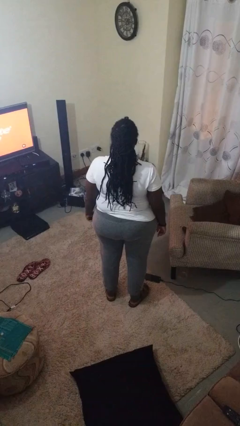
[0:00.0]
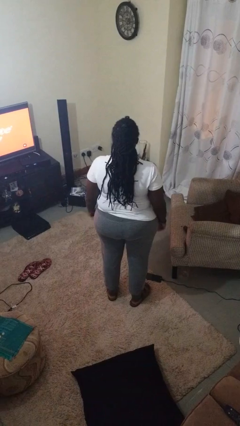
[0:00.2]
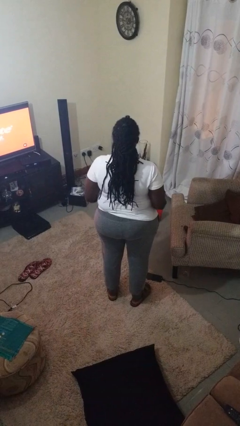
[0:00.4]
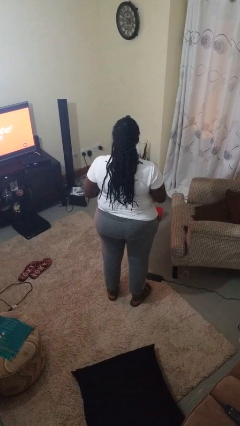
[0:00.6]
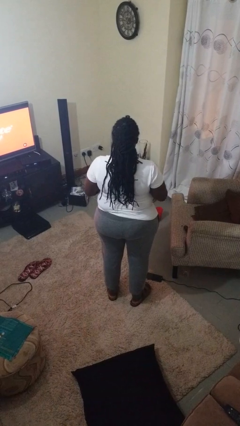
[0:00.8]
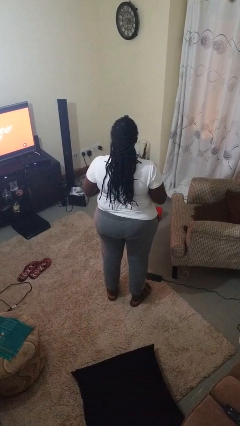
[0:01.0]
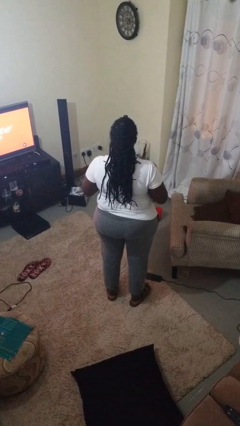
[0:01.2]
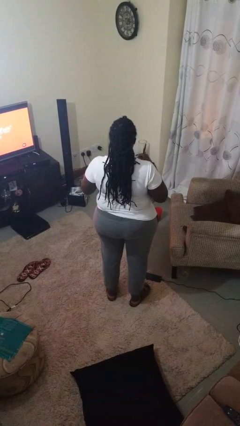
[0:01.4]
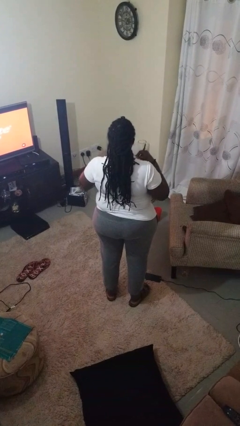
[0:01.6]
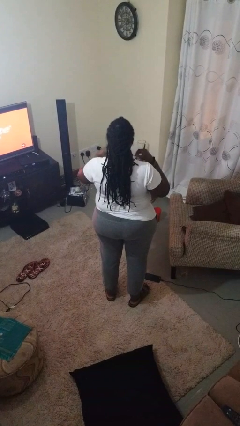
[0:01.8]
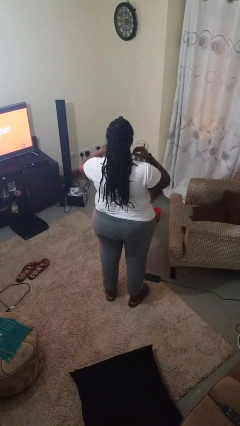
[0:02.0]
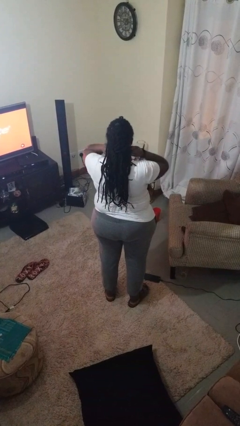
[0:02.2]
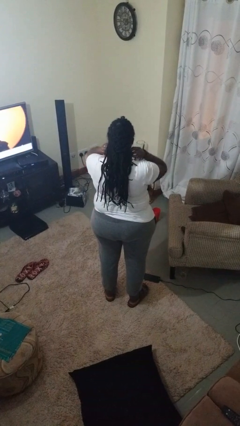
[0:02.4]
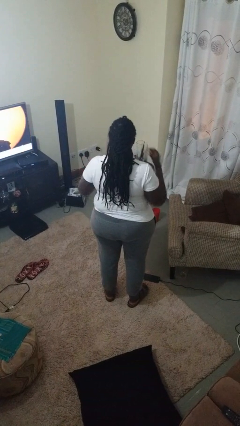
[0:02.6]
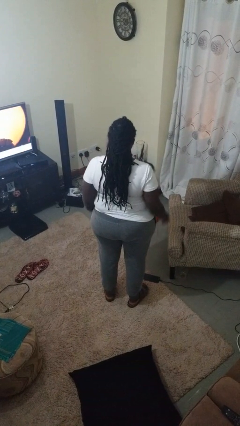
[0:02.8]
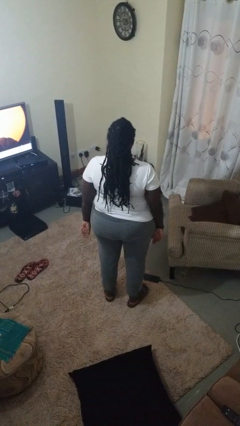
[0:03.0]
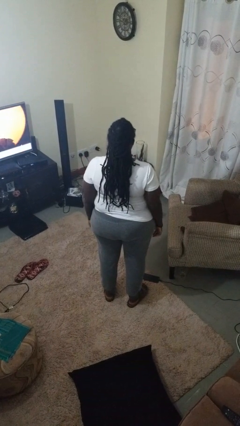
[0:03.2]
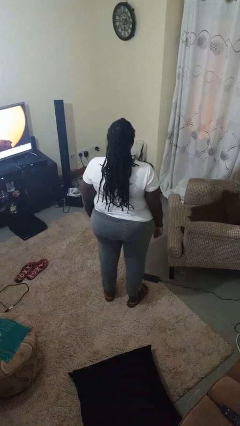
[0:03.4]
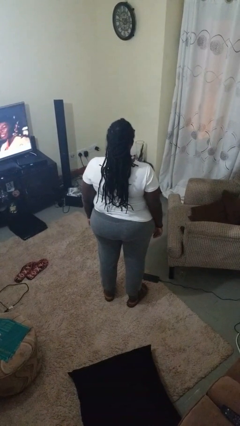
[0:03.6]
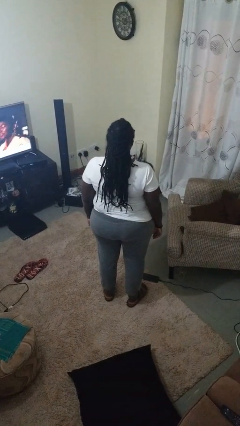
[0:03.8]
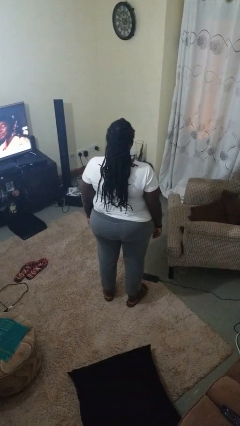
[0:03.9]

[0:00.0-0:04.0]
person puts on necklace

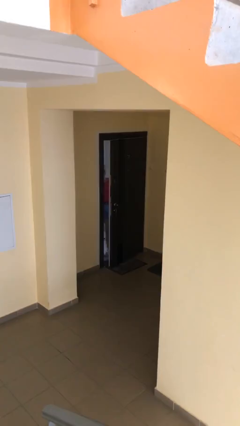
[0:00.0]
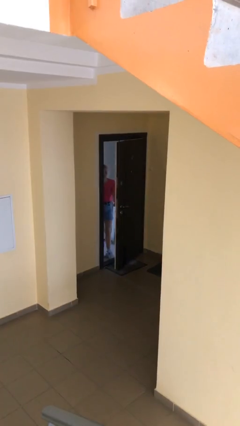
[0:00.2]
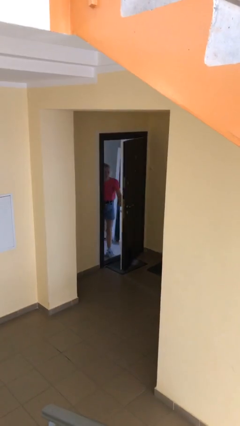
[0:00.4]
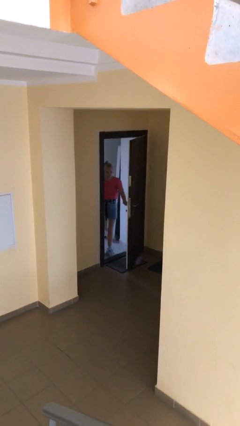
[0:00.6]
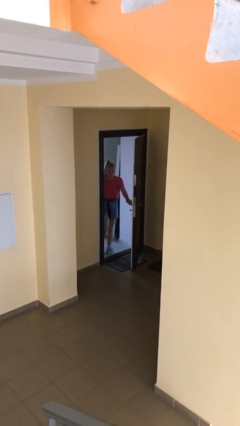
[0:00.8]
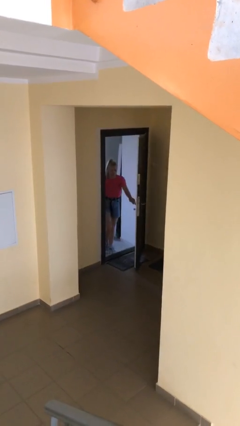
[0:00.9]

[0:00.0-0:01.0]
person opens facility door

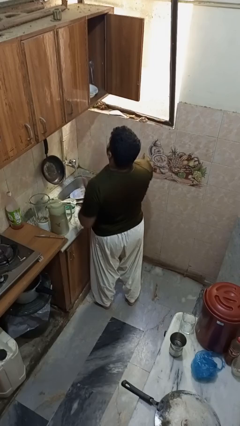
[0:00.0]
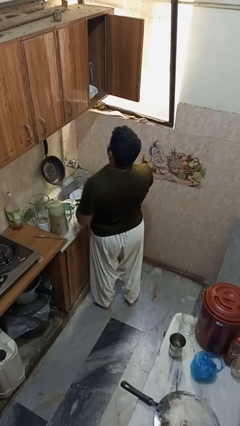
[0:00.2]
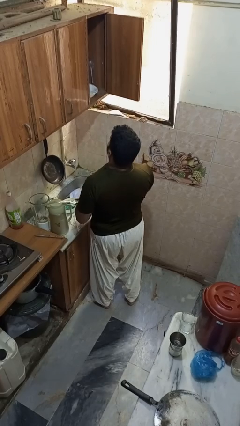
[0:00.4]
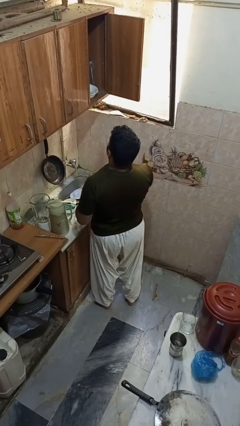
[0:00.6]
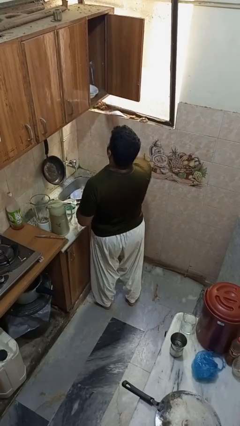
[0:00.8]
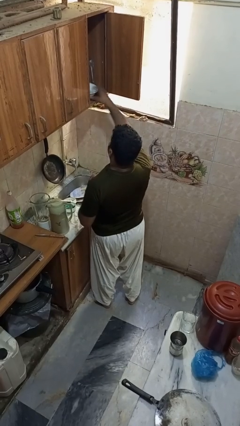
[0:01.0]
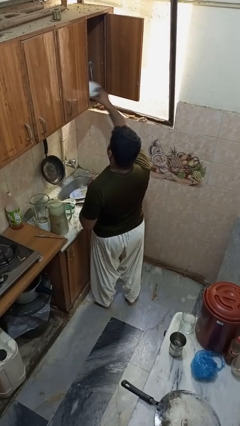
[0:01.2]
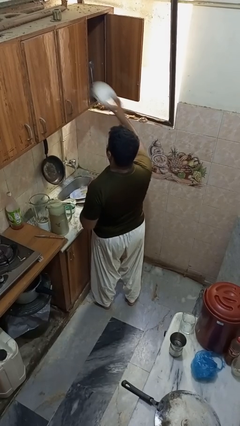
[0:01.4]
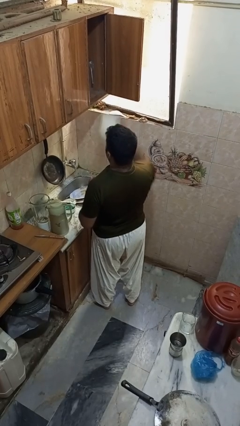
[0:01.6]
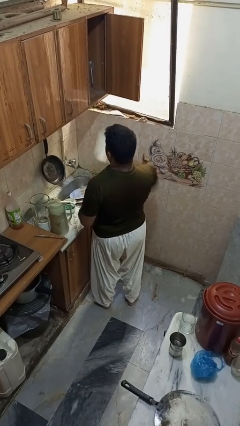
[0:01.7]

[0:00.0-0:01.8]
person takes object from cabinet

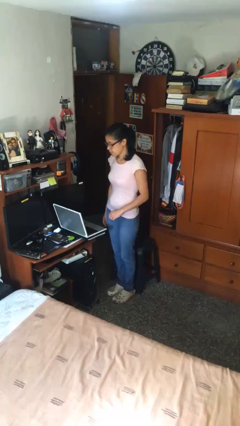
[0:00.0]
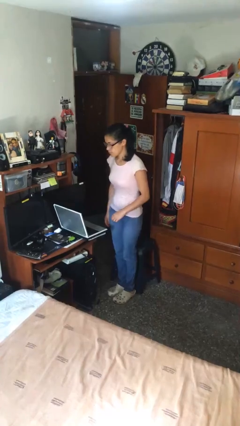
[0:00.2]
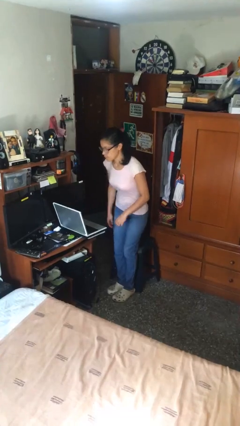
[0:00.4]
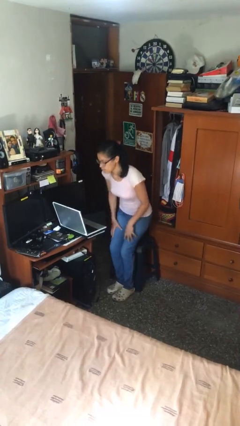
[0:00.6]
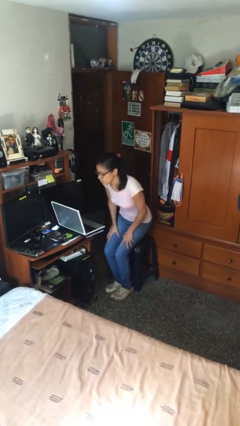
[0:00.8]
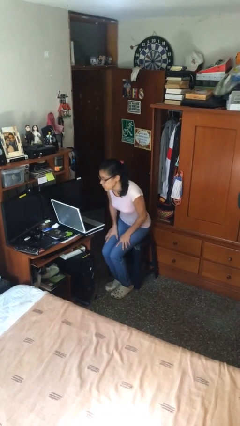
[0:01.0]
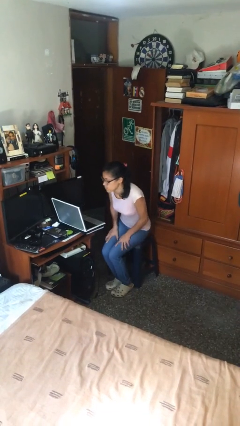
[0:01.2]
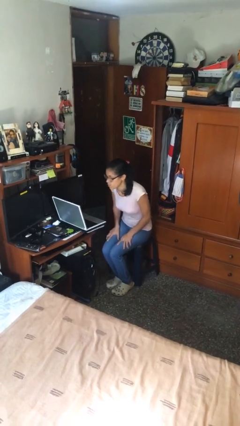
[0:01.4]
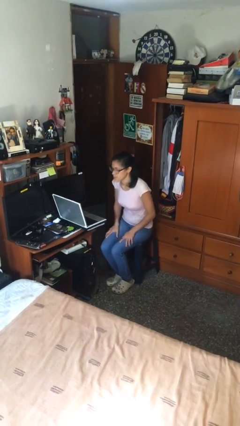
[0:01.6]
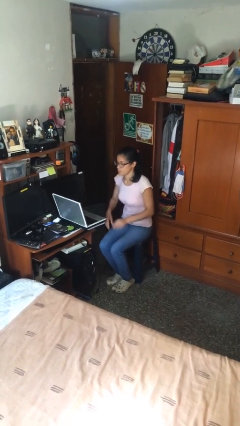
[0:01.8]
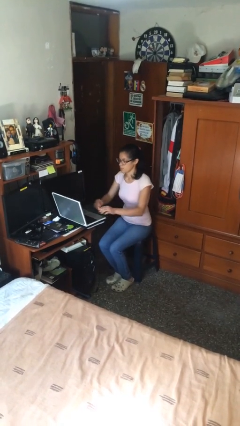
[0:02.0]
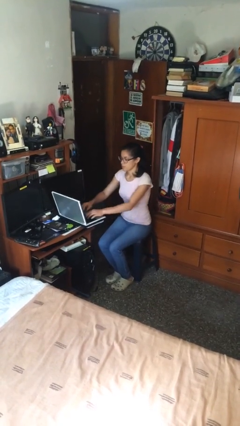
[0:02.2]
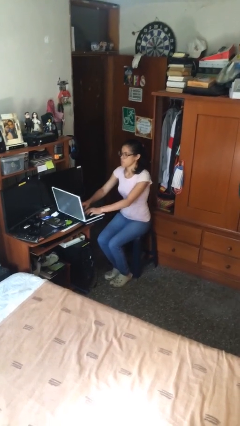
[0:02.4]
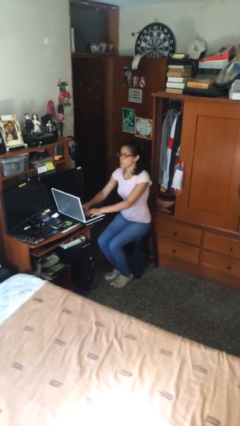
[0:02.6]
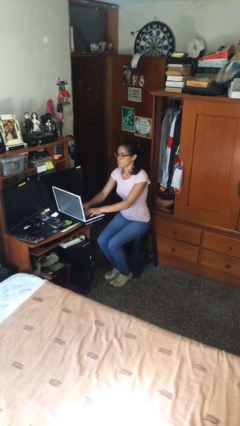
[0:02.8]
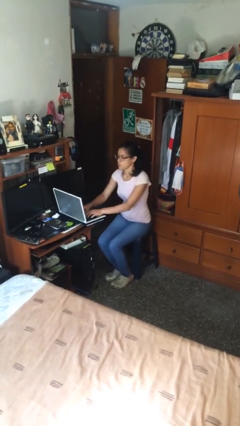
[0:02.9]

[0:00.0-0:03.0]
person sits down

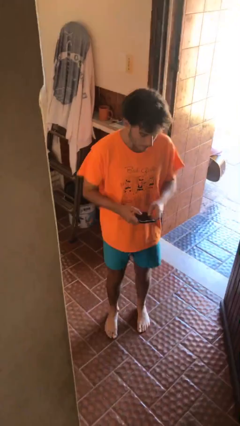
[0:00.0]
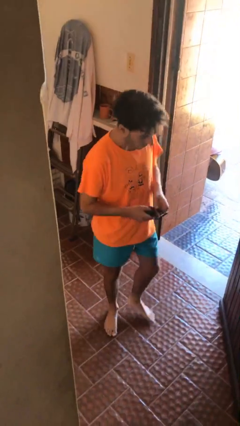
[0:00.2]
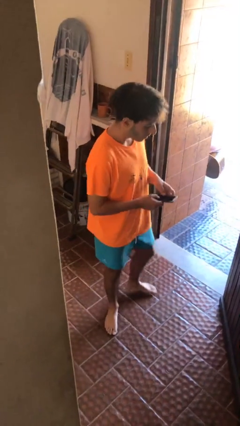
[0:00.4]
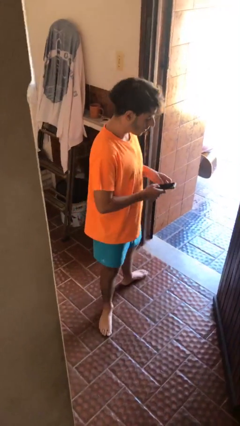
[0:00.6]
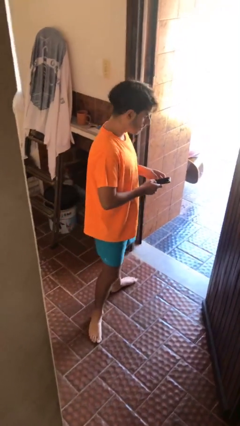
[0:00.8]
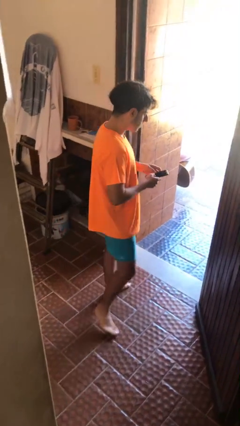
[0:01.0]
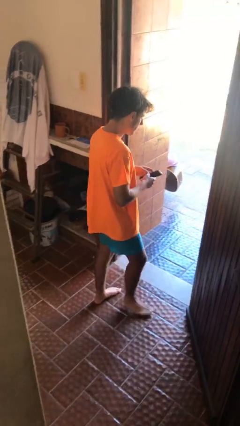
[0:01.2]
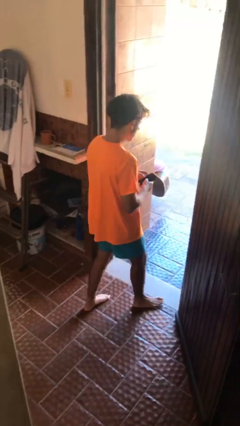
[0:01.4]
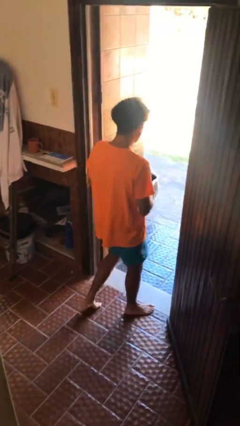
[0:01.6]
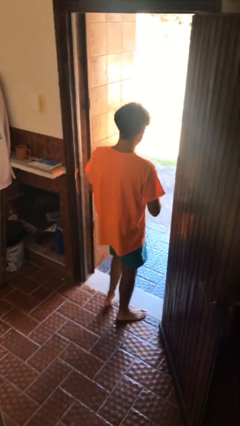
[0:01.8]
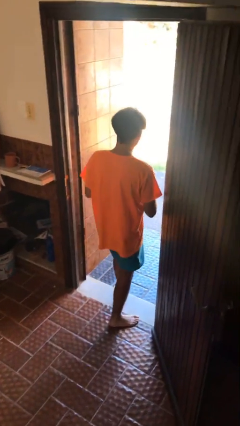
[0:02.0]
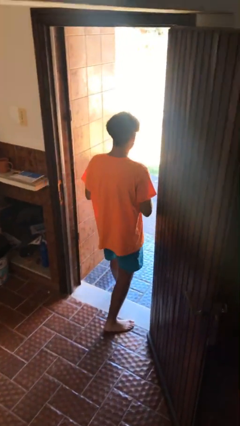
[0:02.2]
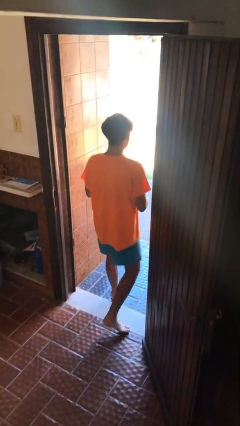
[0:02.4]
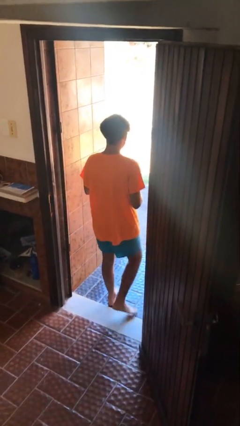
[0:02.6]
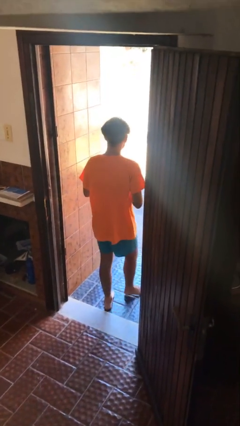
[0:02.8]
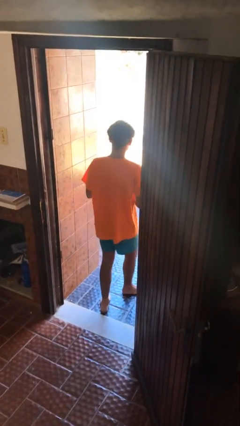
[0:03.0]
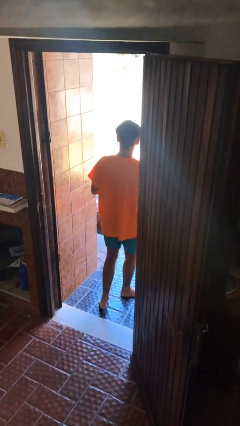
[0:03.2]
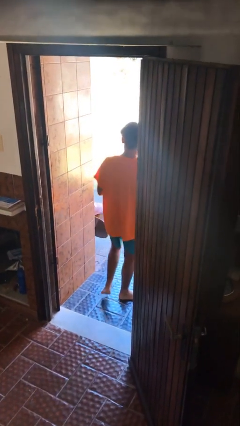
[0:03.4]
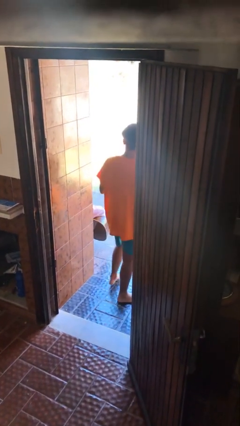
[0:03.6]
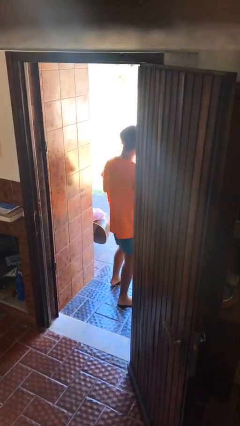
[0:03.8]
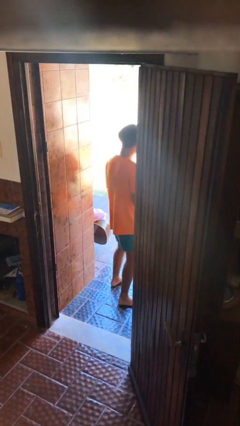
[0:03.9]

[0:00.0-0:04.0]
person exits scene through structure

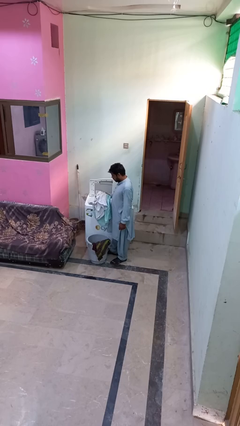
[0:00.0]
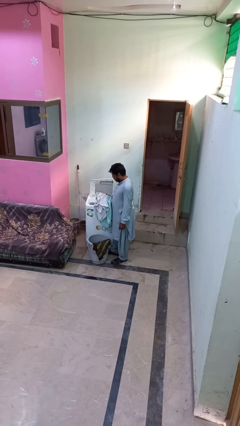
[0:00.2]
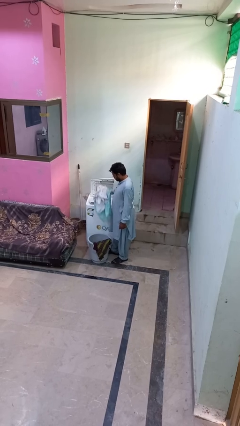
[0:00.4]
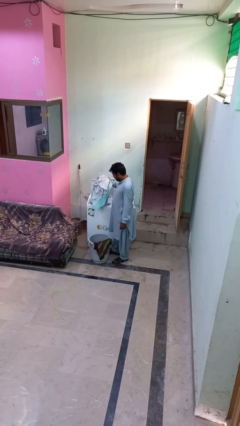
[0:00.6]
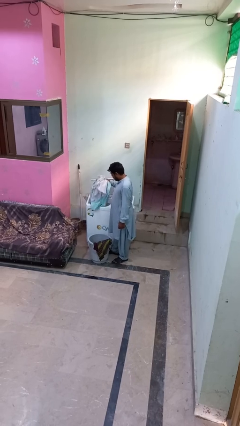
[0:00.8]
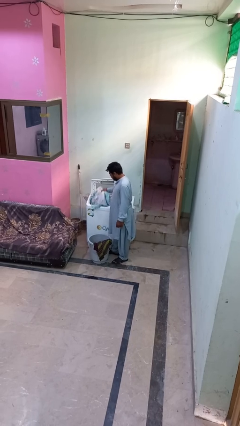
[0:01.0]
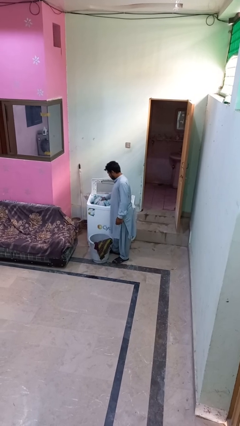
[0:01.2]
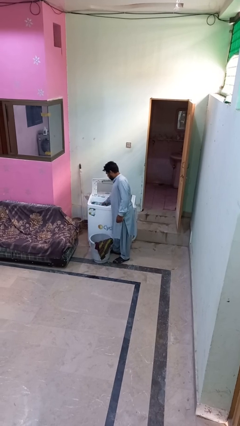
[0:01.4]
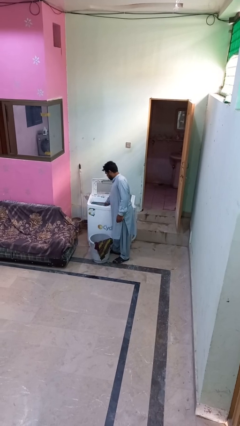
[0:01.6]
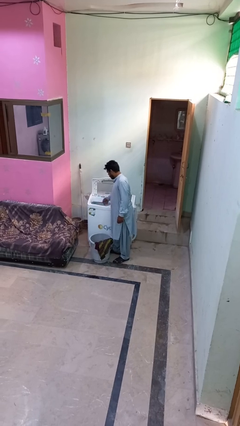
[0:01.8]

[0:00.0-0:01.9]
person loads clotheswasher

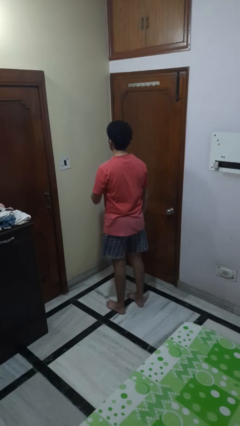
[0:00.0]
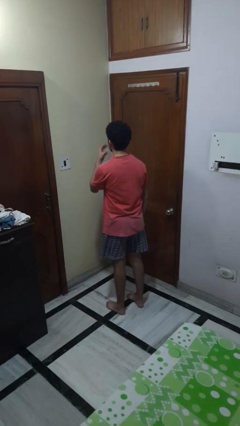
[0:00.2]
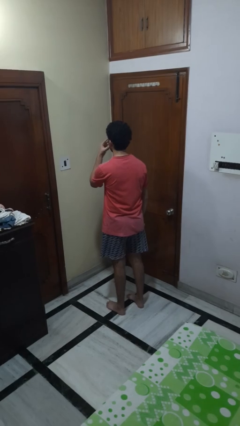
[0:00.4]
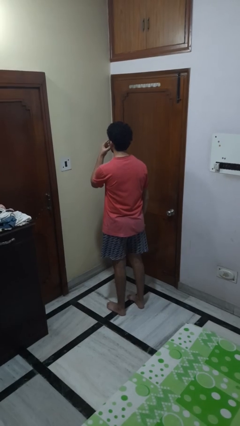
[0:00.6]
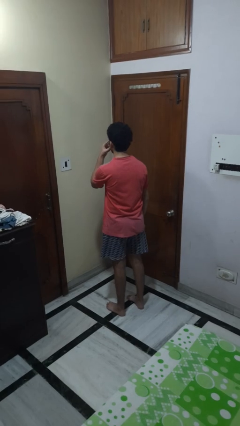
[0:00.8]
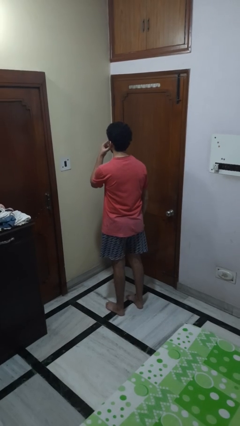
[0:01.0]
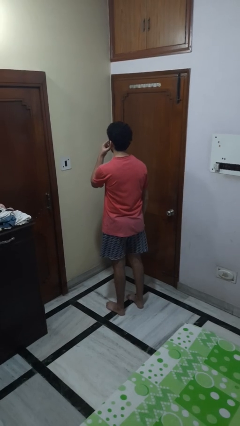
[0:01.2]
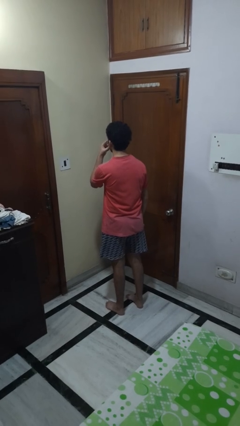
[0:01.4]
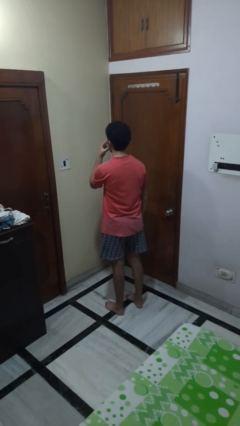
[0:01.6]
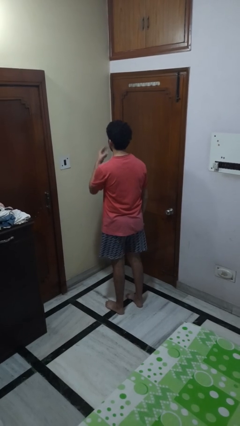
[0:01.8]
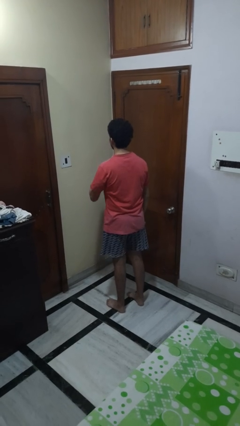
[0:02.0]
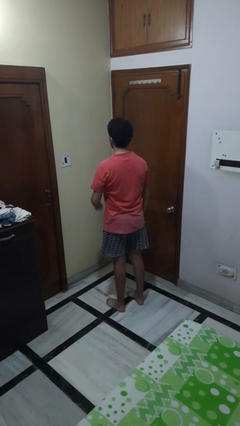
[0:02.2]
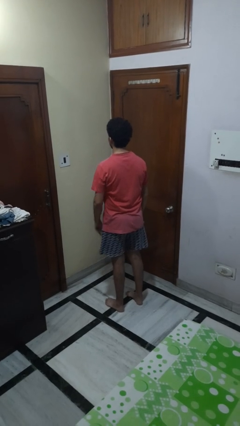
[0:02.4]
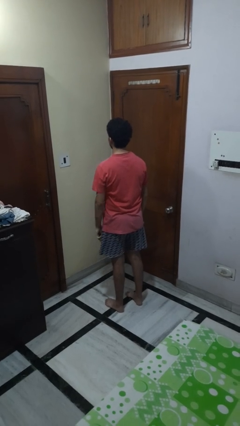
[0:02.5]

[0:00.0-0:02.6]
person gestures watch closely
